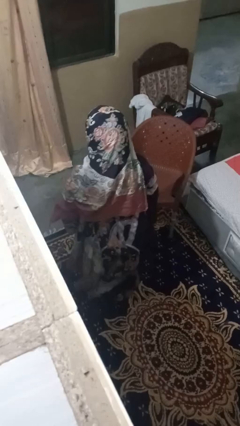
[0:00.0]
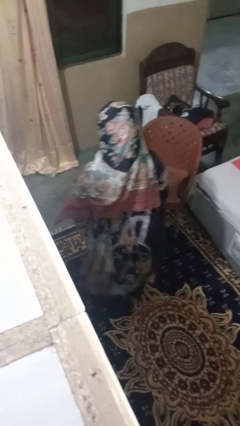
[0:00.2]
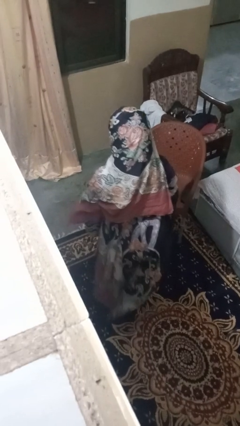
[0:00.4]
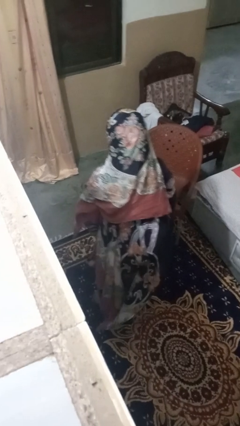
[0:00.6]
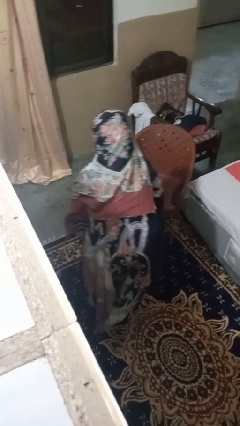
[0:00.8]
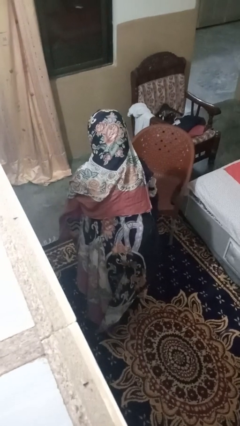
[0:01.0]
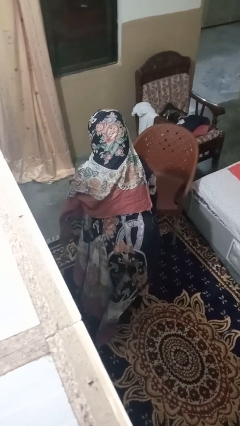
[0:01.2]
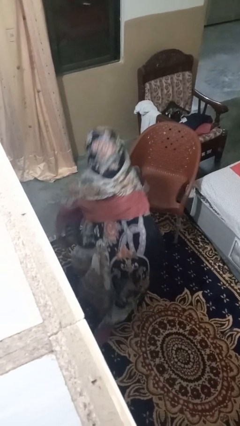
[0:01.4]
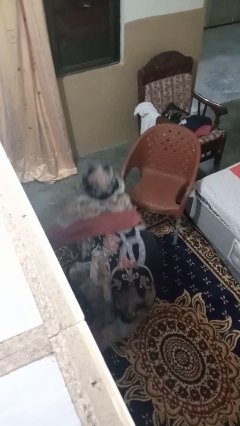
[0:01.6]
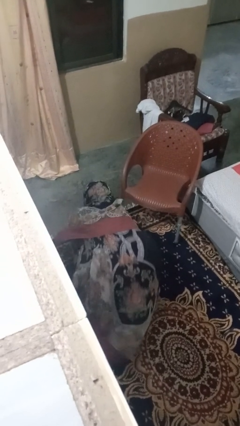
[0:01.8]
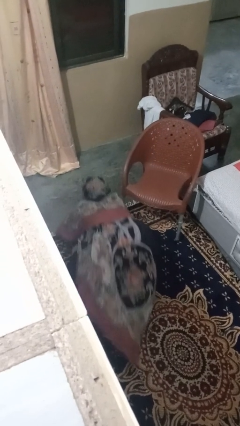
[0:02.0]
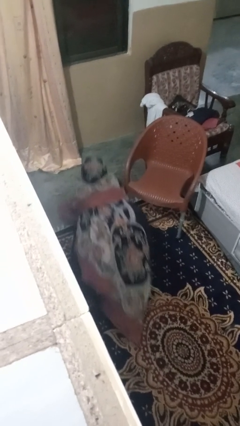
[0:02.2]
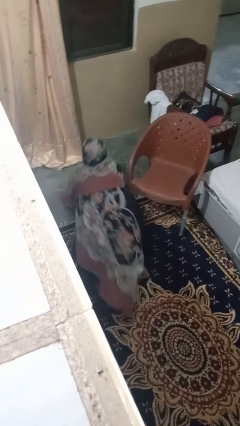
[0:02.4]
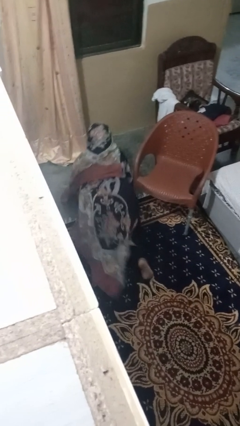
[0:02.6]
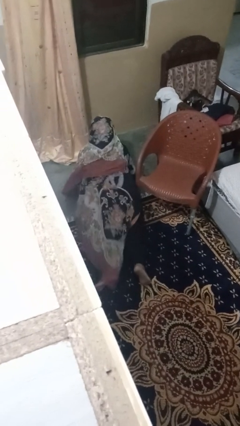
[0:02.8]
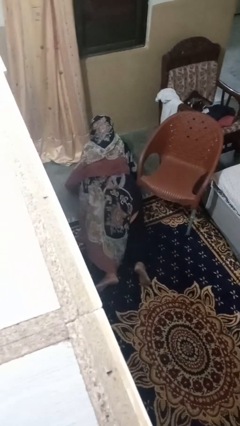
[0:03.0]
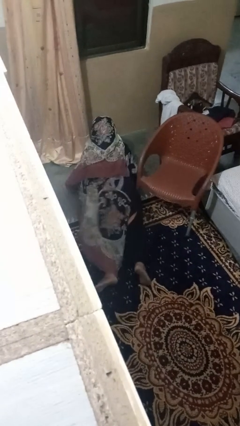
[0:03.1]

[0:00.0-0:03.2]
person lies down on floor

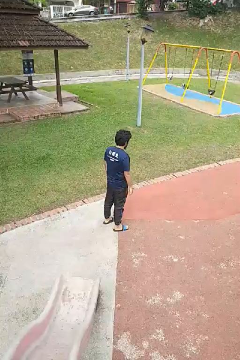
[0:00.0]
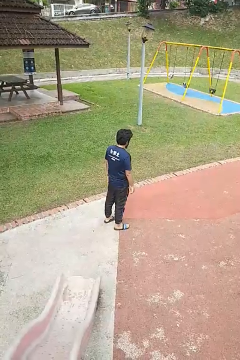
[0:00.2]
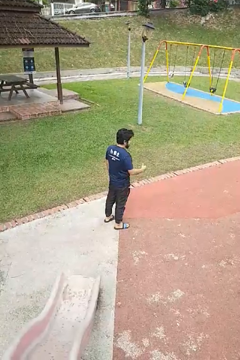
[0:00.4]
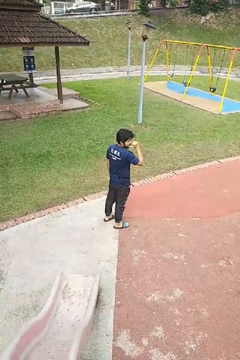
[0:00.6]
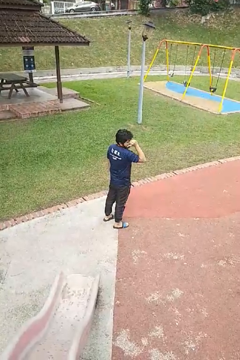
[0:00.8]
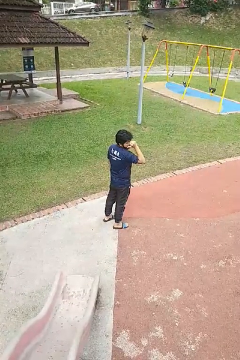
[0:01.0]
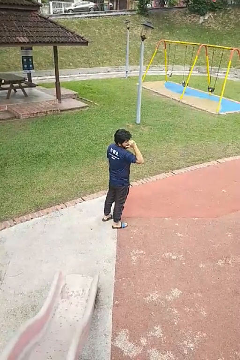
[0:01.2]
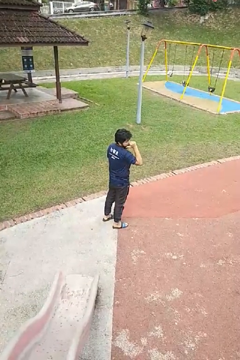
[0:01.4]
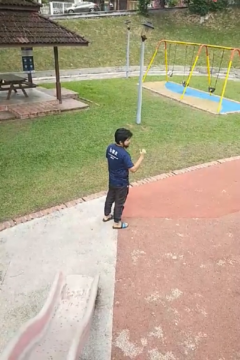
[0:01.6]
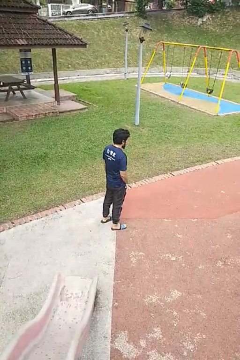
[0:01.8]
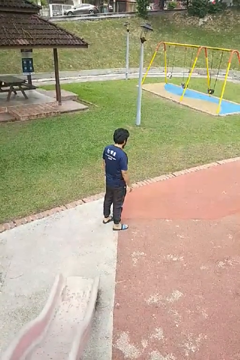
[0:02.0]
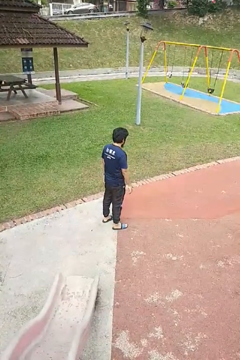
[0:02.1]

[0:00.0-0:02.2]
person gestures behind me

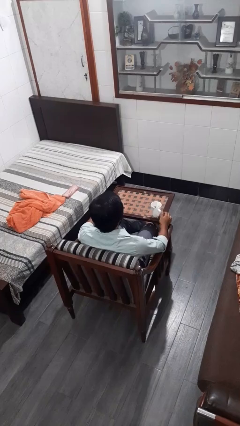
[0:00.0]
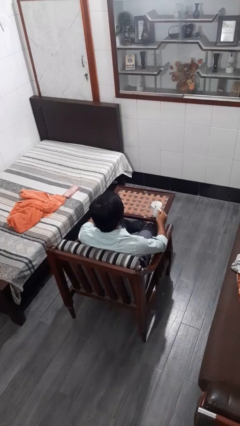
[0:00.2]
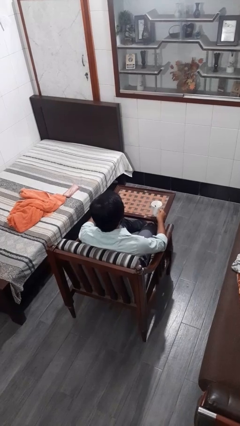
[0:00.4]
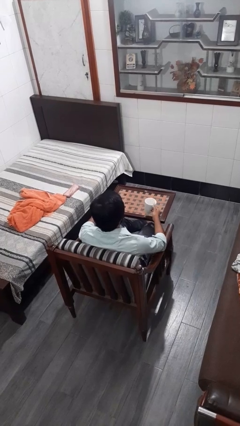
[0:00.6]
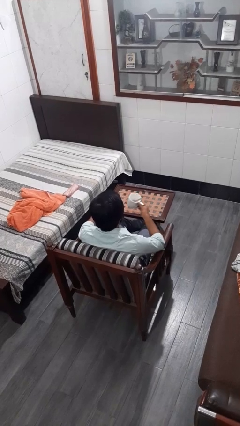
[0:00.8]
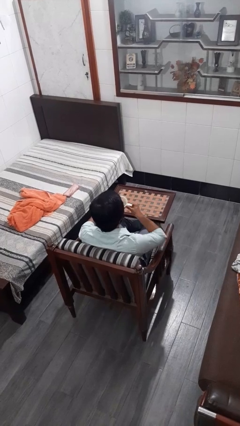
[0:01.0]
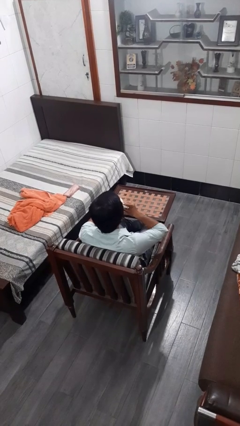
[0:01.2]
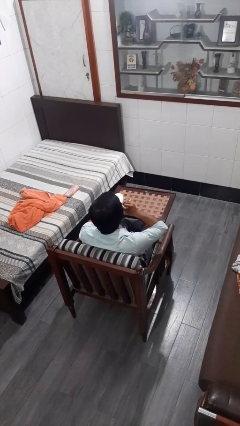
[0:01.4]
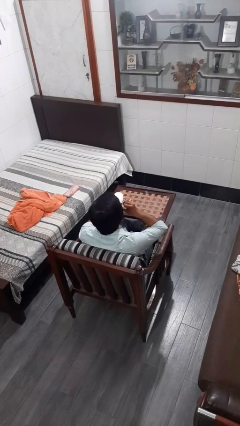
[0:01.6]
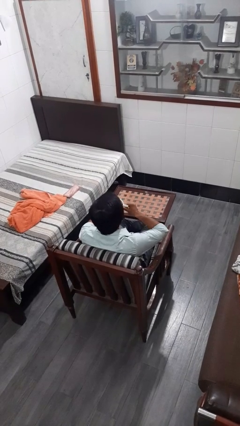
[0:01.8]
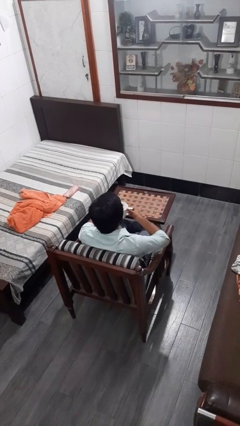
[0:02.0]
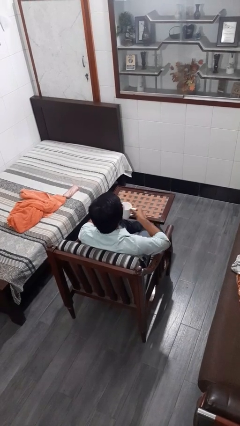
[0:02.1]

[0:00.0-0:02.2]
person drinks from mug

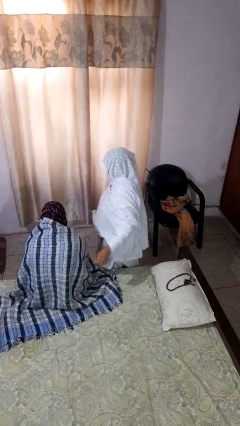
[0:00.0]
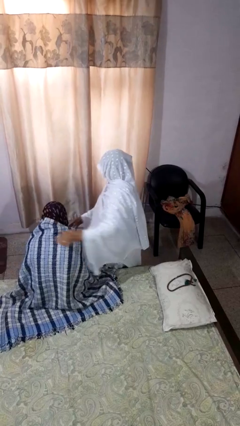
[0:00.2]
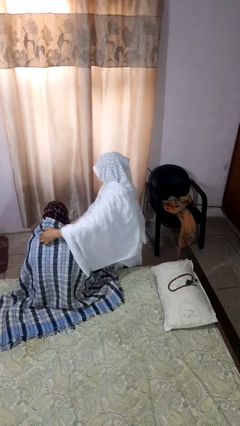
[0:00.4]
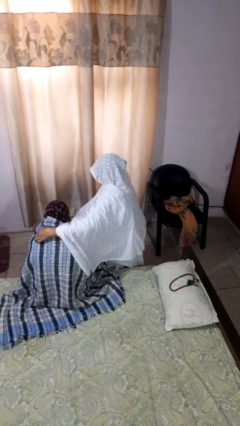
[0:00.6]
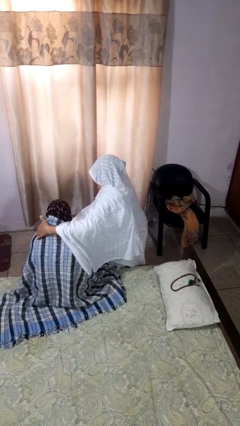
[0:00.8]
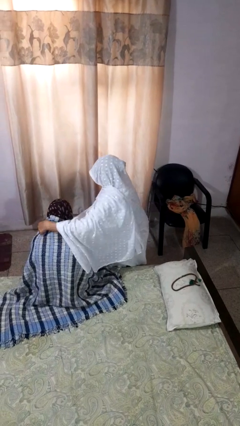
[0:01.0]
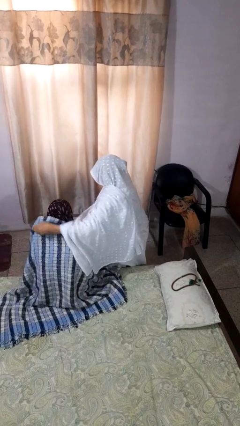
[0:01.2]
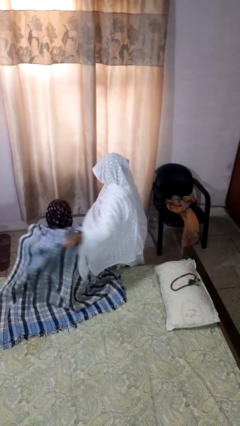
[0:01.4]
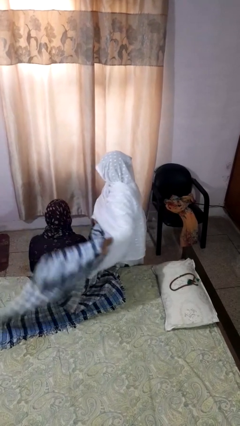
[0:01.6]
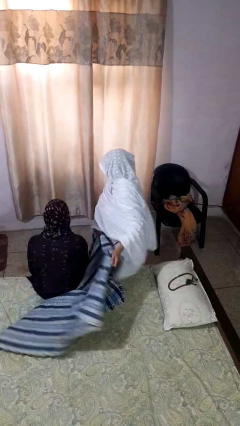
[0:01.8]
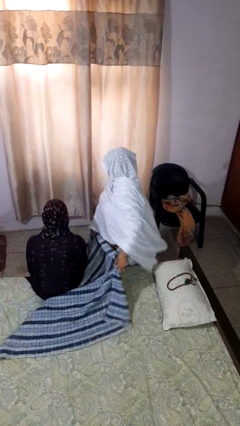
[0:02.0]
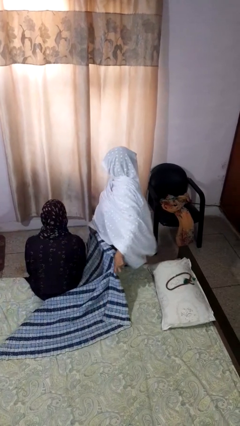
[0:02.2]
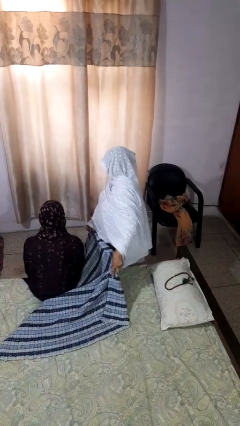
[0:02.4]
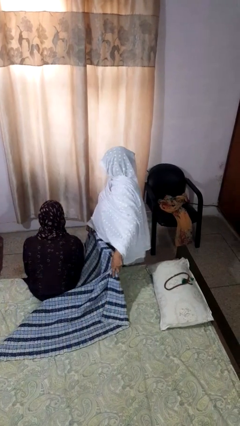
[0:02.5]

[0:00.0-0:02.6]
person uncovers friend with blanket

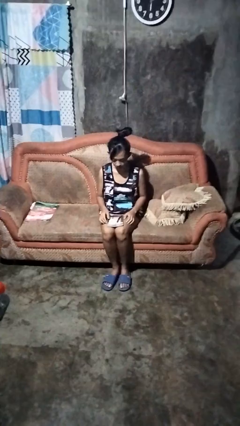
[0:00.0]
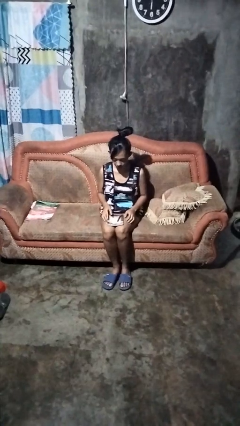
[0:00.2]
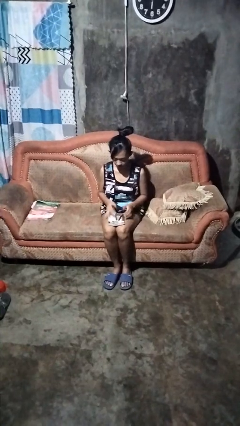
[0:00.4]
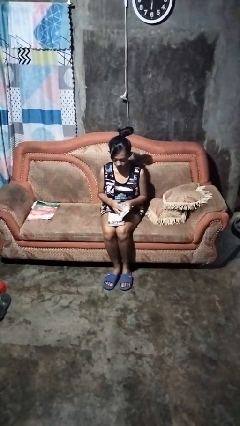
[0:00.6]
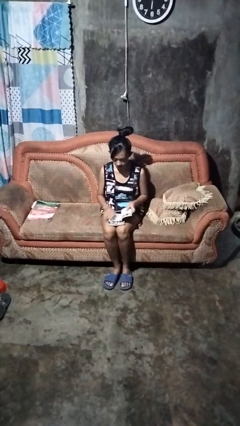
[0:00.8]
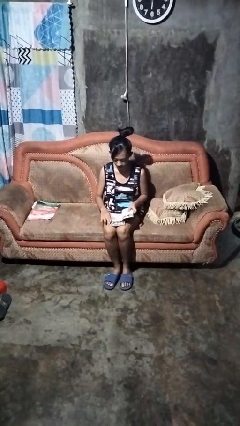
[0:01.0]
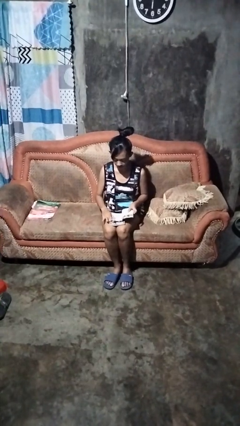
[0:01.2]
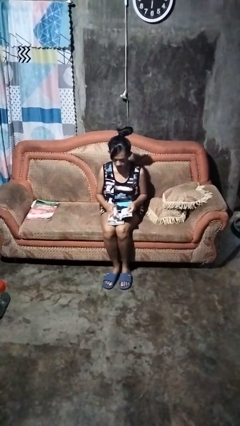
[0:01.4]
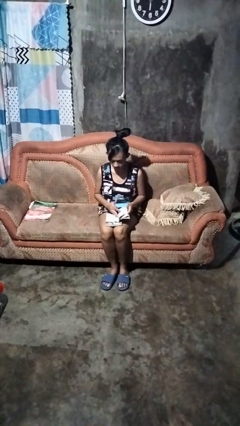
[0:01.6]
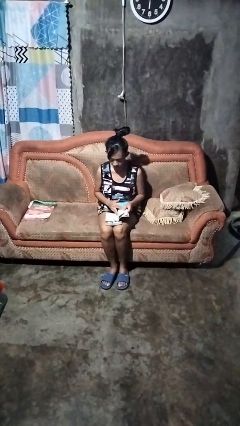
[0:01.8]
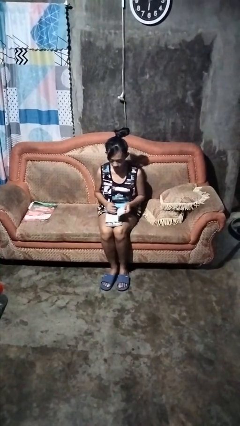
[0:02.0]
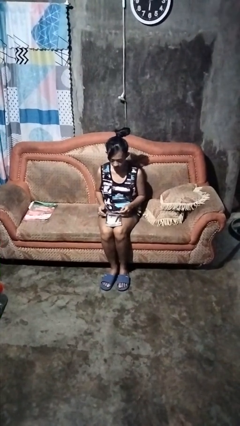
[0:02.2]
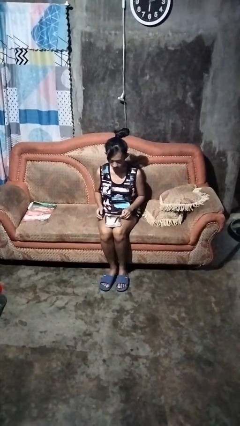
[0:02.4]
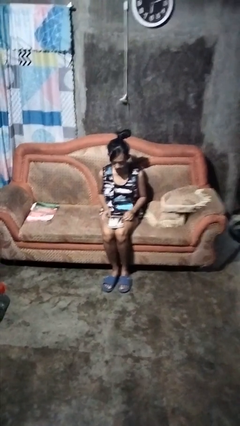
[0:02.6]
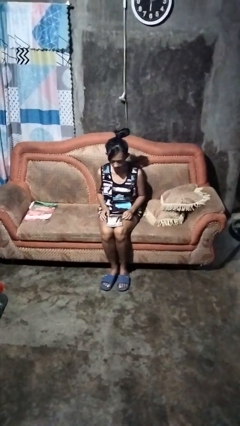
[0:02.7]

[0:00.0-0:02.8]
person reads book

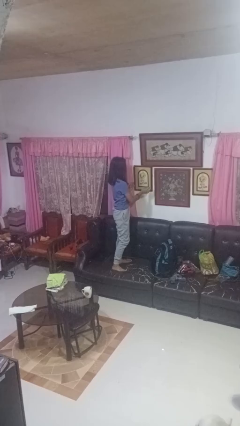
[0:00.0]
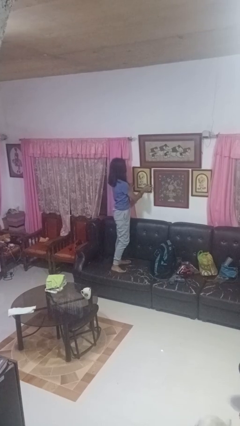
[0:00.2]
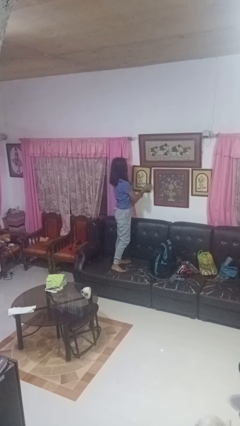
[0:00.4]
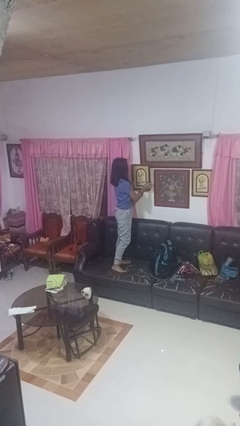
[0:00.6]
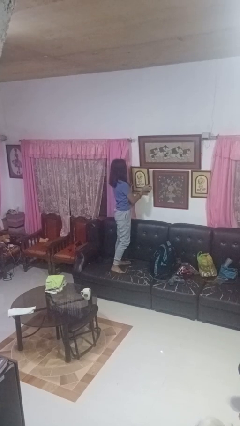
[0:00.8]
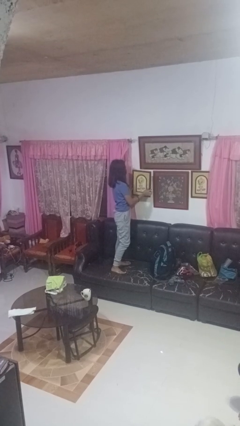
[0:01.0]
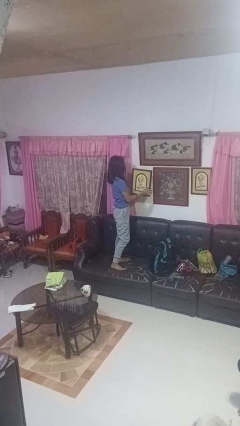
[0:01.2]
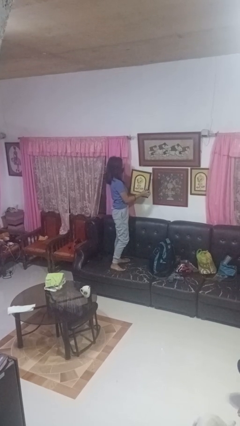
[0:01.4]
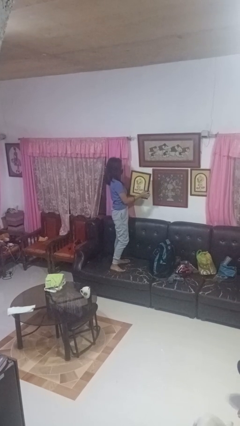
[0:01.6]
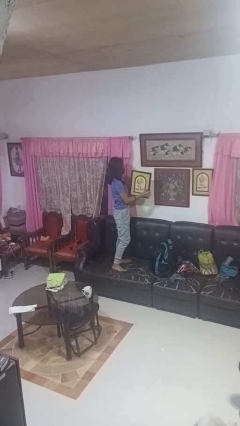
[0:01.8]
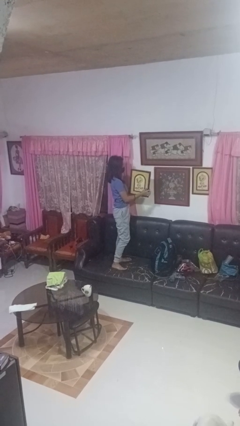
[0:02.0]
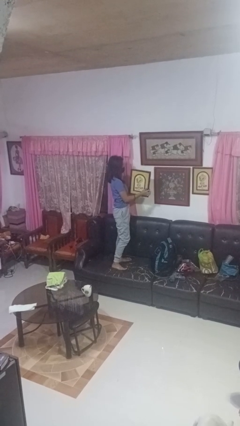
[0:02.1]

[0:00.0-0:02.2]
person takes down picture frame

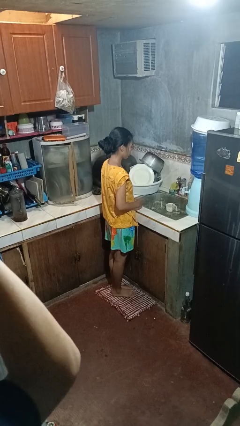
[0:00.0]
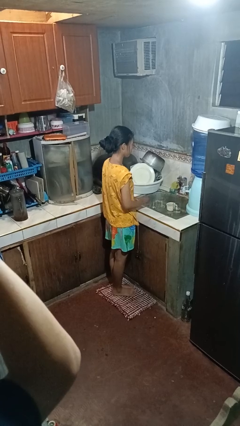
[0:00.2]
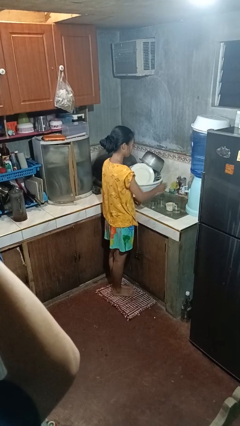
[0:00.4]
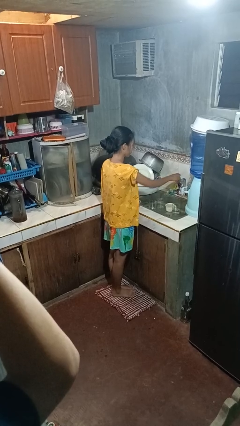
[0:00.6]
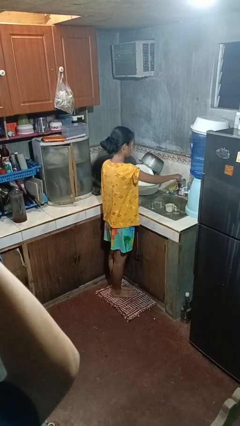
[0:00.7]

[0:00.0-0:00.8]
person turns off faucet

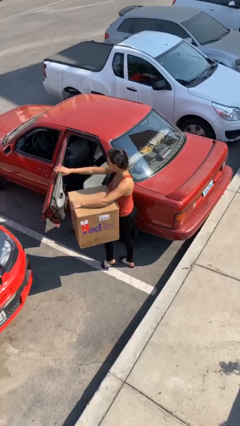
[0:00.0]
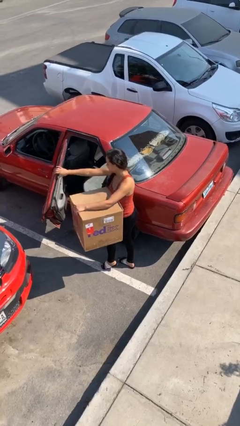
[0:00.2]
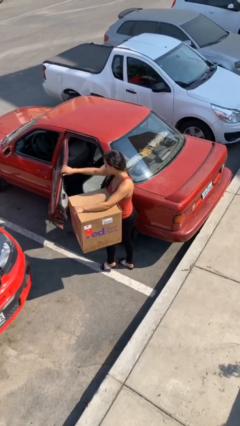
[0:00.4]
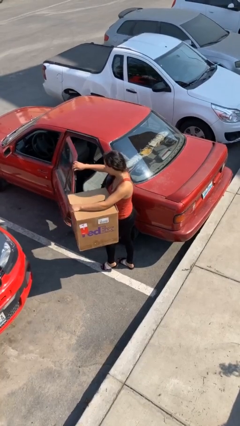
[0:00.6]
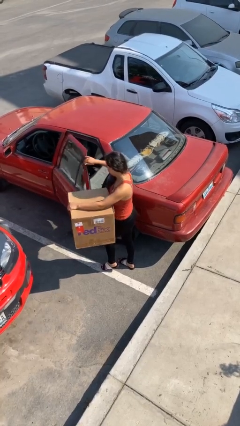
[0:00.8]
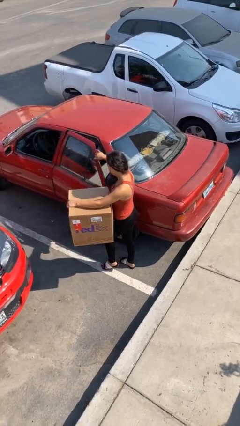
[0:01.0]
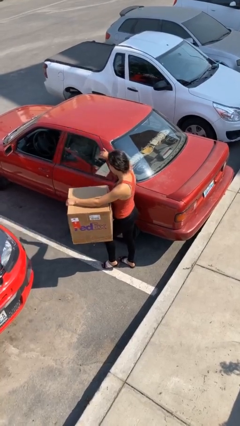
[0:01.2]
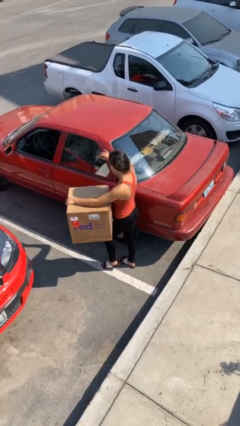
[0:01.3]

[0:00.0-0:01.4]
person closes car door

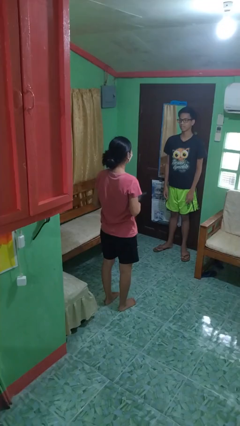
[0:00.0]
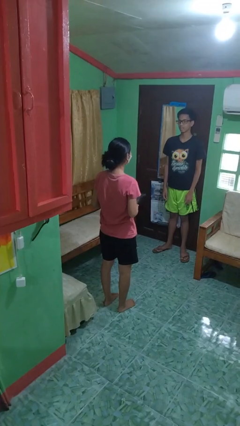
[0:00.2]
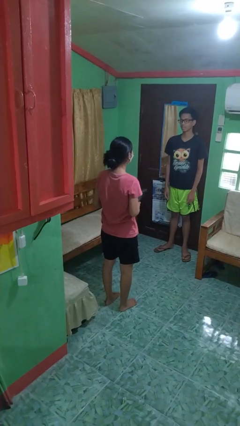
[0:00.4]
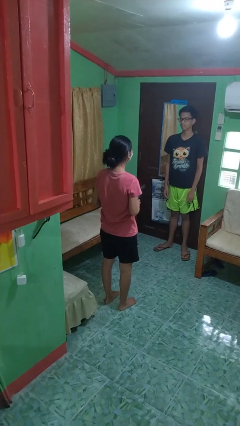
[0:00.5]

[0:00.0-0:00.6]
person throws object to person
